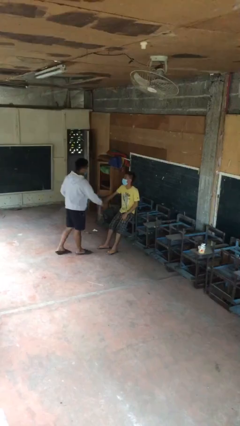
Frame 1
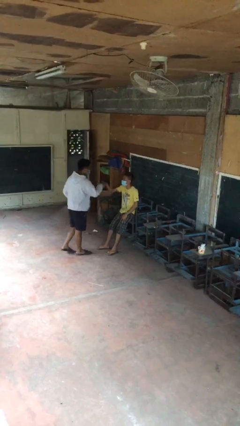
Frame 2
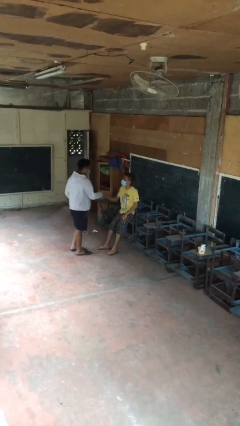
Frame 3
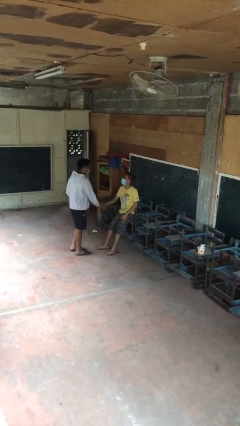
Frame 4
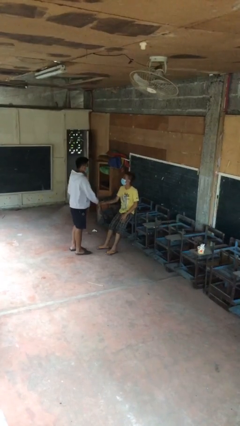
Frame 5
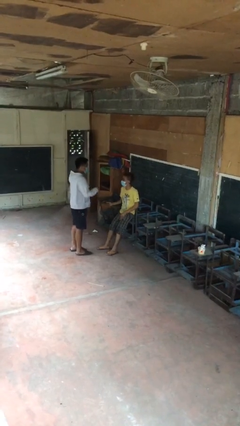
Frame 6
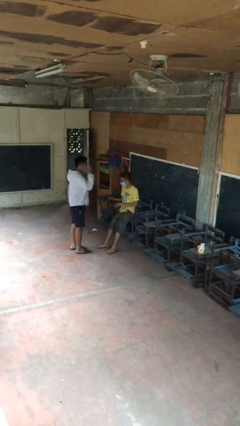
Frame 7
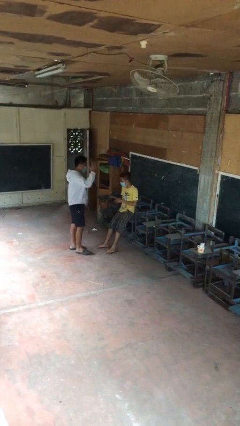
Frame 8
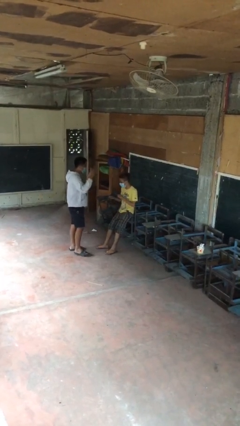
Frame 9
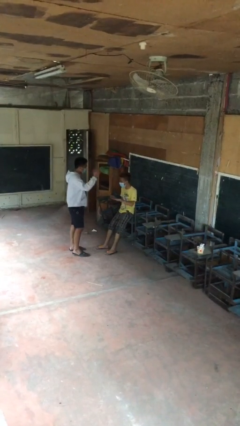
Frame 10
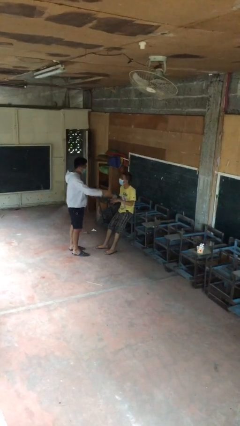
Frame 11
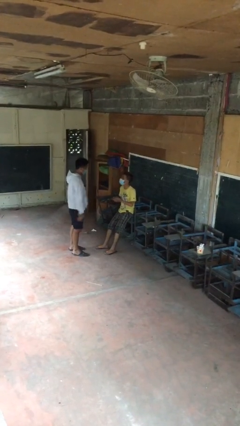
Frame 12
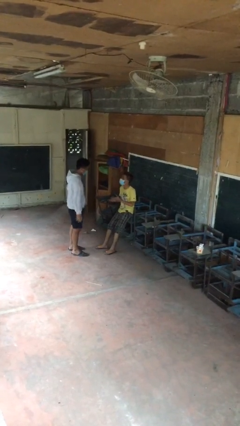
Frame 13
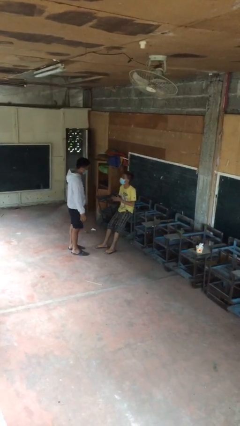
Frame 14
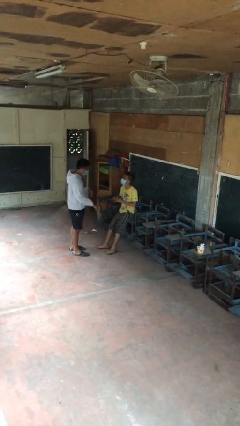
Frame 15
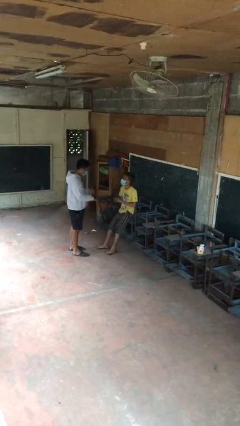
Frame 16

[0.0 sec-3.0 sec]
person shakes hand

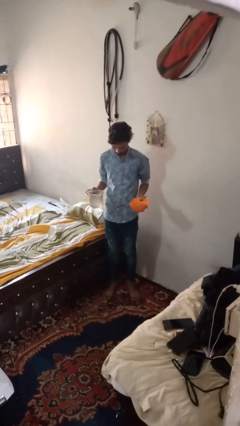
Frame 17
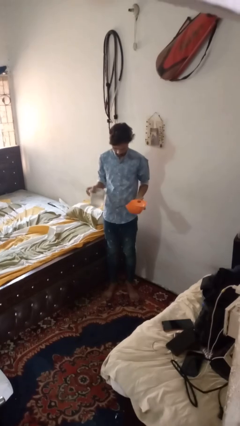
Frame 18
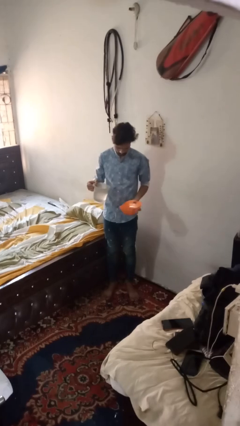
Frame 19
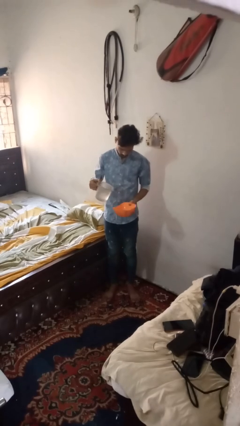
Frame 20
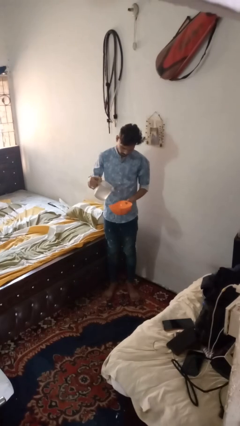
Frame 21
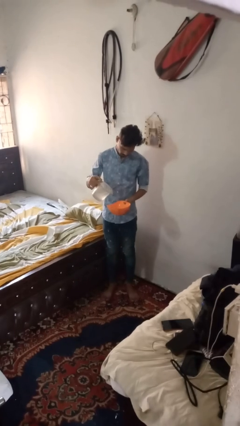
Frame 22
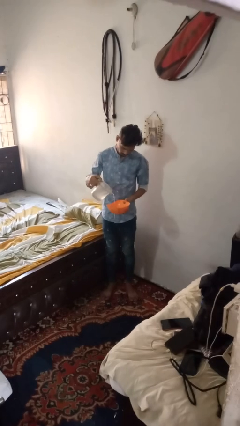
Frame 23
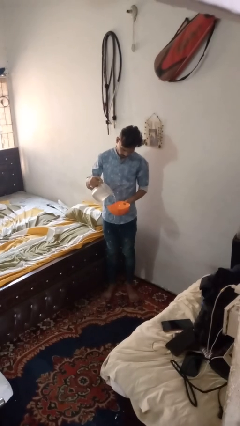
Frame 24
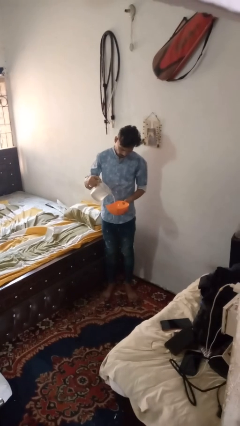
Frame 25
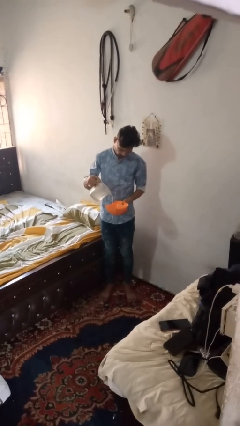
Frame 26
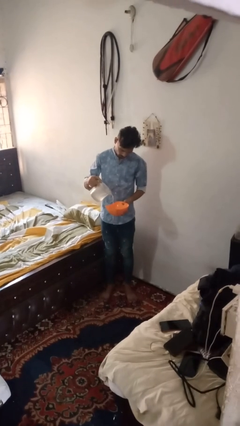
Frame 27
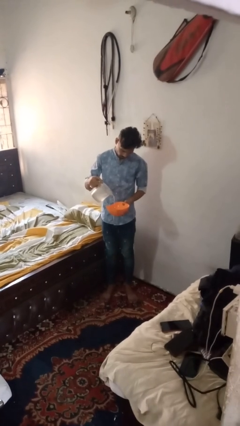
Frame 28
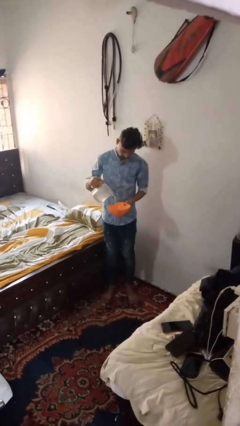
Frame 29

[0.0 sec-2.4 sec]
person pours into bowl

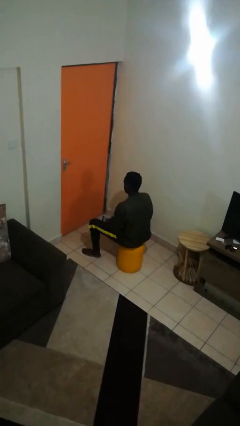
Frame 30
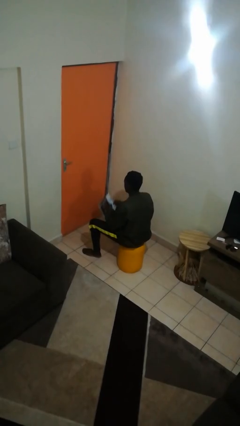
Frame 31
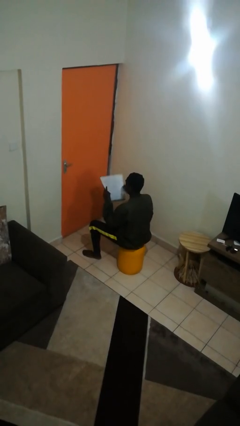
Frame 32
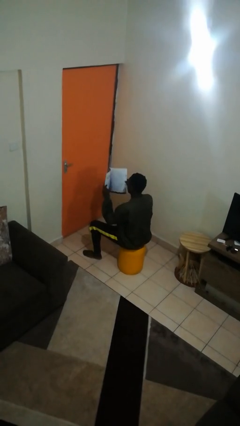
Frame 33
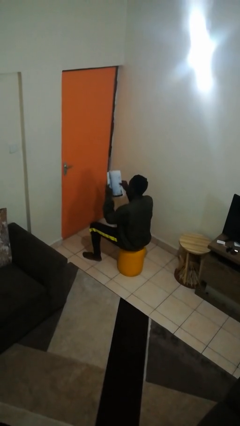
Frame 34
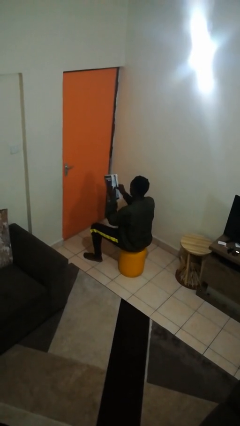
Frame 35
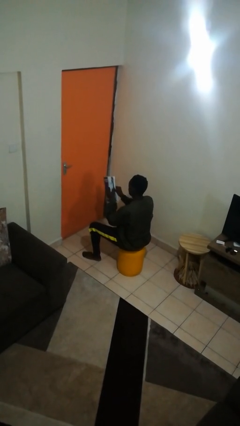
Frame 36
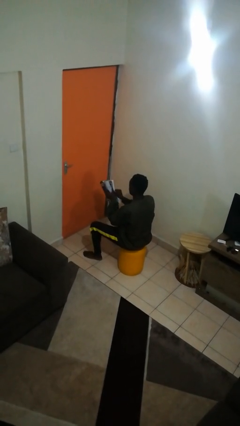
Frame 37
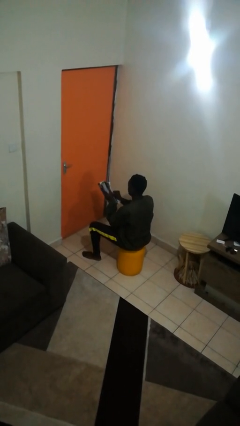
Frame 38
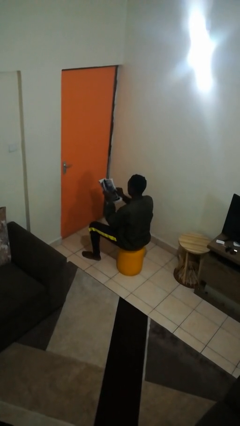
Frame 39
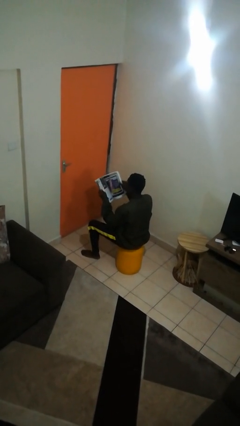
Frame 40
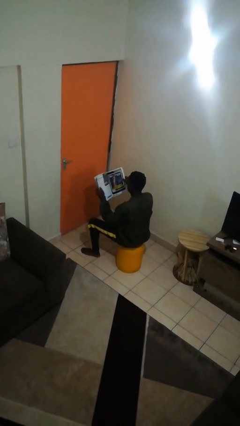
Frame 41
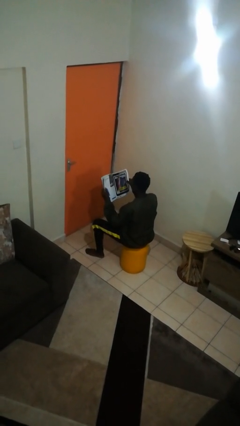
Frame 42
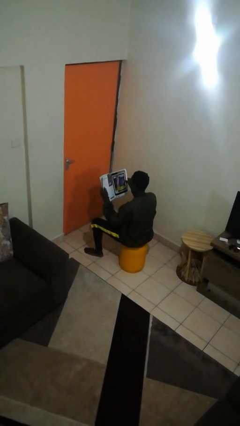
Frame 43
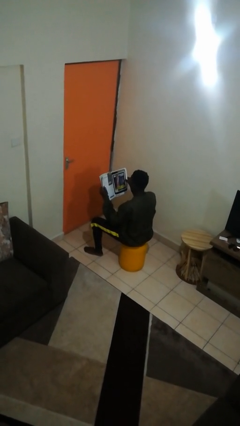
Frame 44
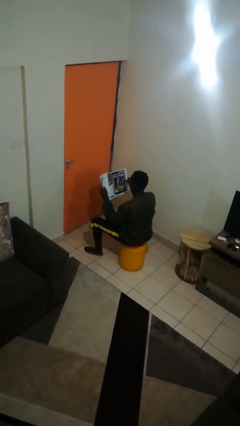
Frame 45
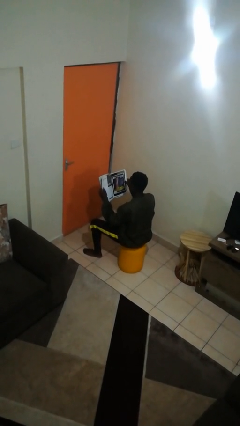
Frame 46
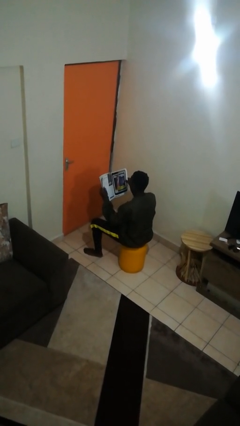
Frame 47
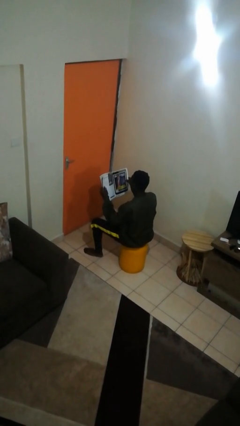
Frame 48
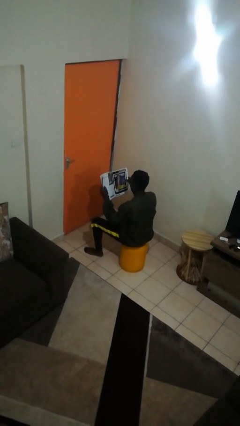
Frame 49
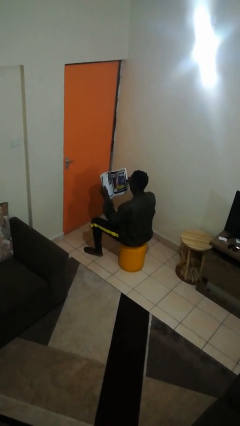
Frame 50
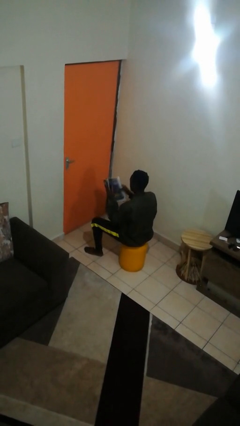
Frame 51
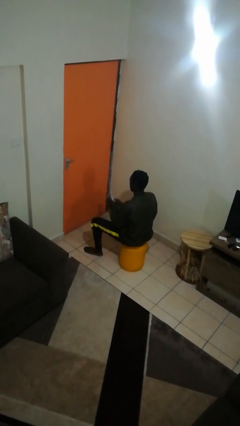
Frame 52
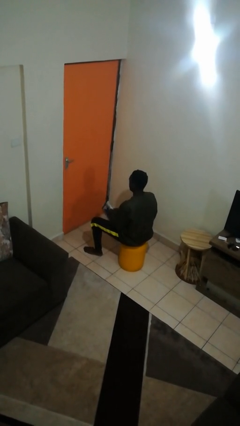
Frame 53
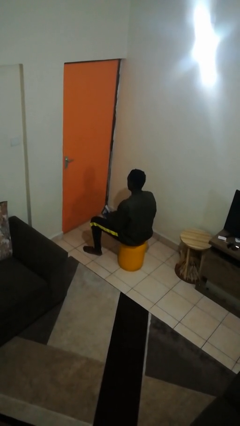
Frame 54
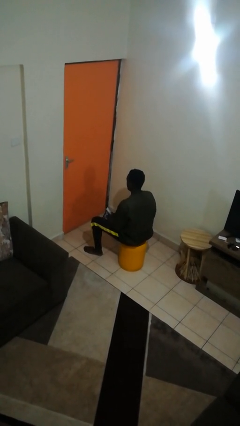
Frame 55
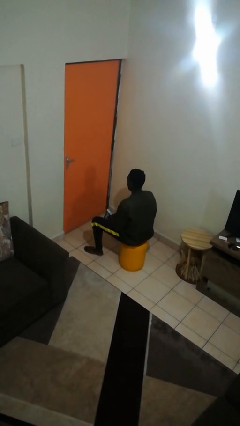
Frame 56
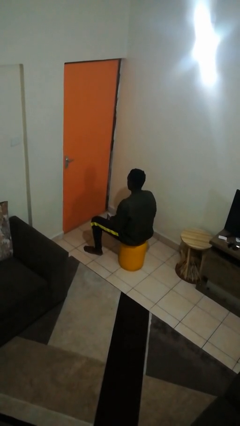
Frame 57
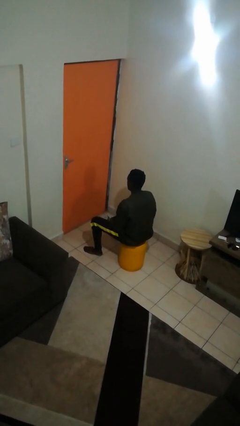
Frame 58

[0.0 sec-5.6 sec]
person reads magazine

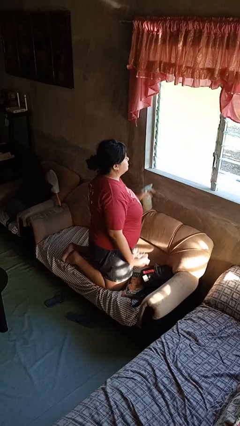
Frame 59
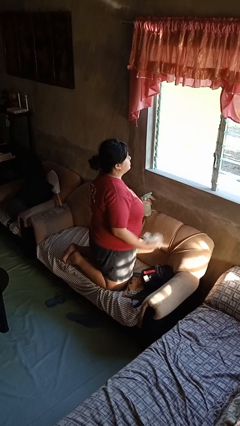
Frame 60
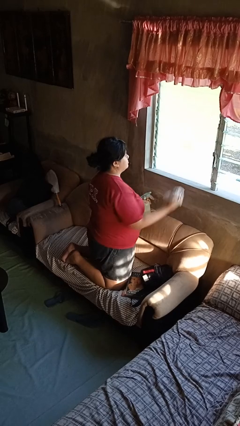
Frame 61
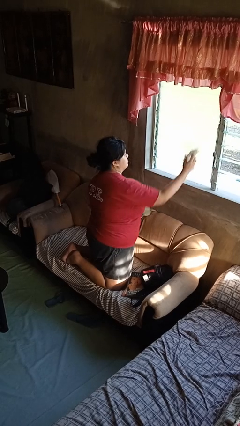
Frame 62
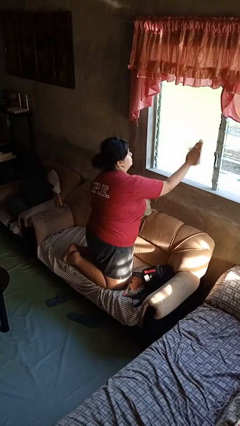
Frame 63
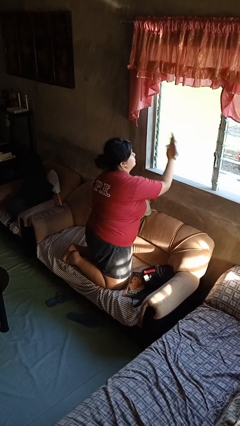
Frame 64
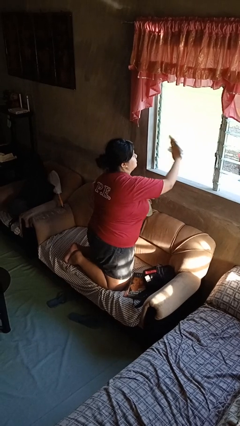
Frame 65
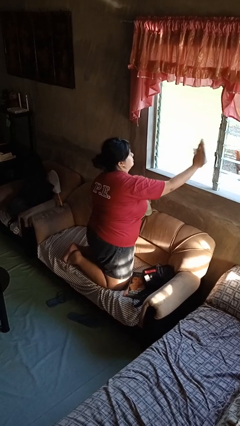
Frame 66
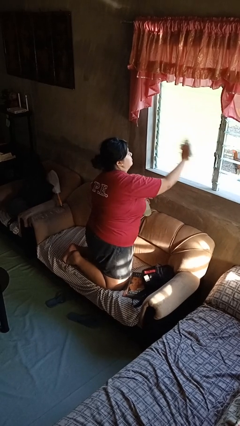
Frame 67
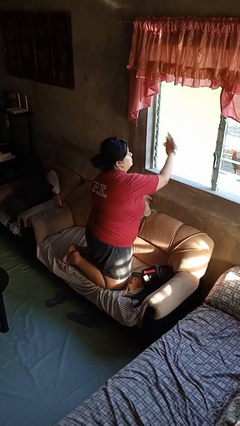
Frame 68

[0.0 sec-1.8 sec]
person washes window

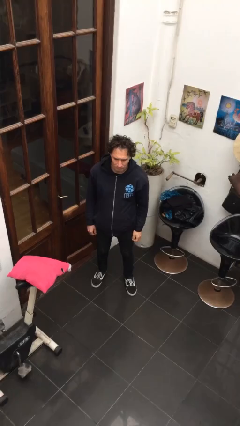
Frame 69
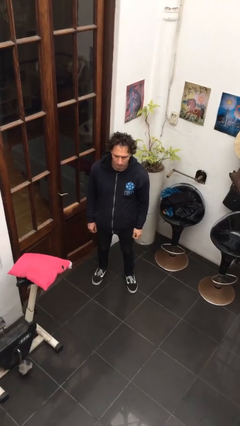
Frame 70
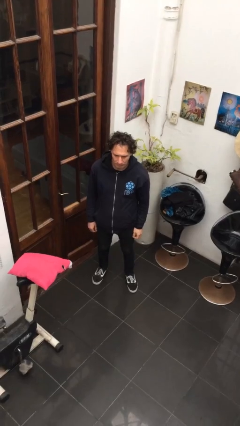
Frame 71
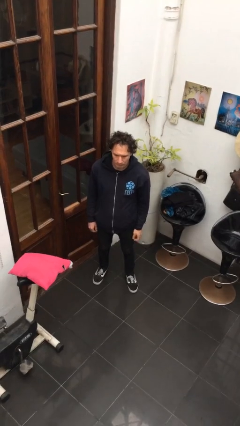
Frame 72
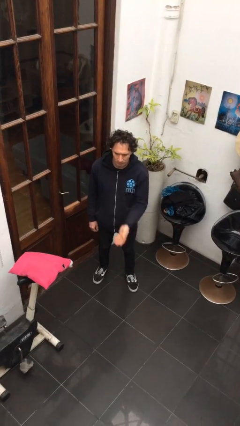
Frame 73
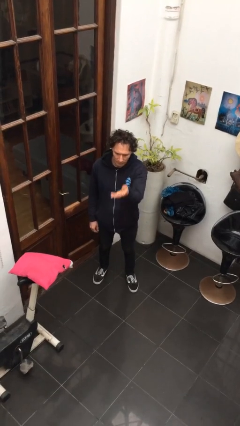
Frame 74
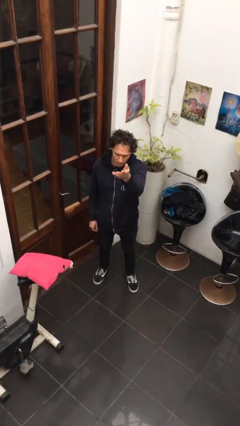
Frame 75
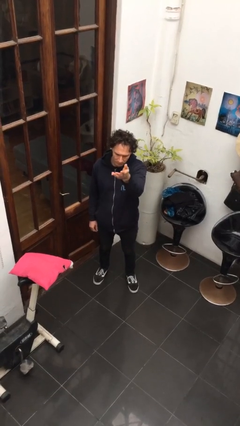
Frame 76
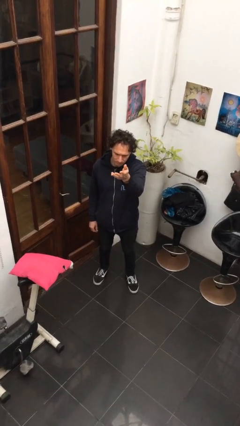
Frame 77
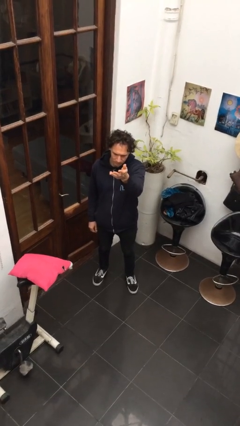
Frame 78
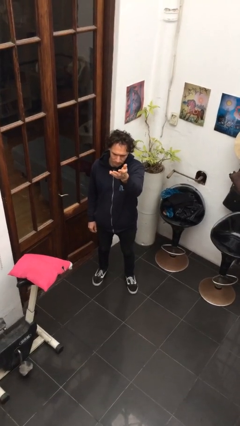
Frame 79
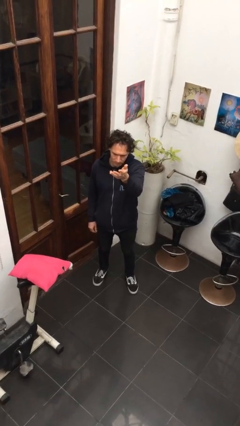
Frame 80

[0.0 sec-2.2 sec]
person gestures swipe up

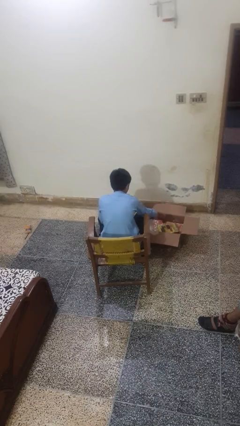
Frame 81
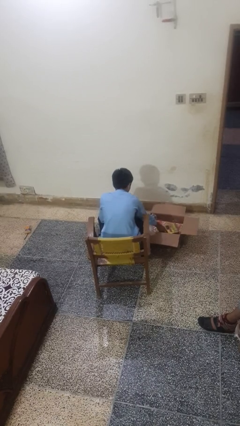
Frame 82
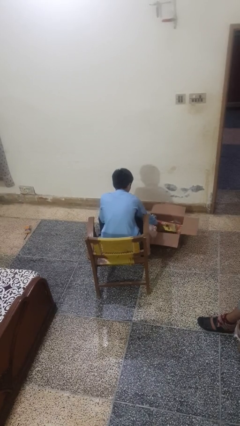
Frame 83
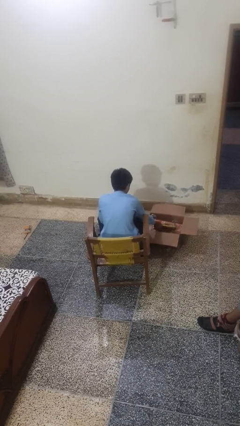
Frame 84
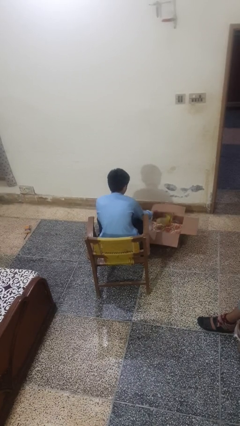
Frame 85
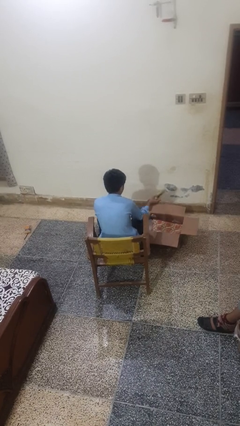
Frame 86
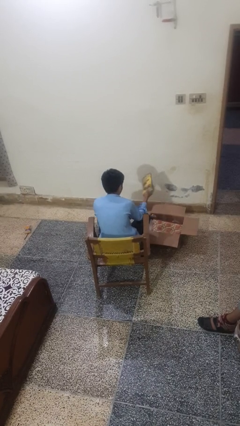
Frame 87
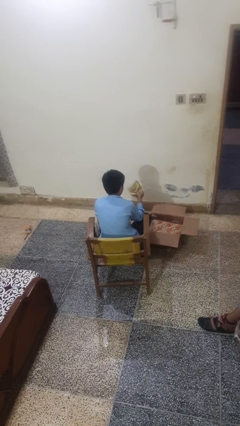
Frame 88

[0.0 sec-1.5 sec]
person takes object from box

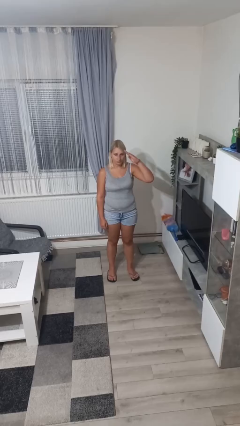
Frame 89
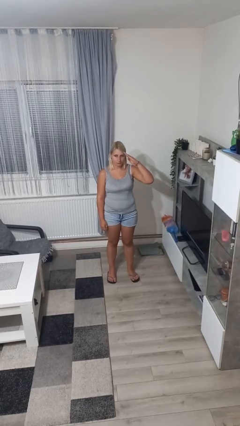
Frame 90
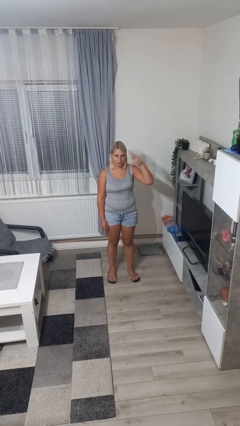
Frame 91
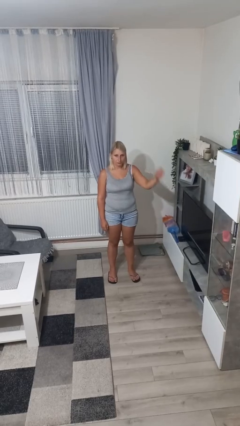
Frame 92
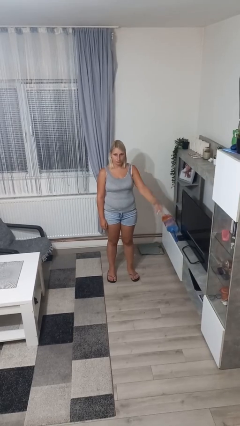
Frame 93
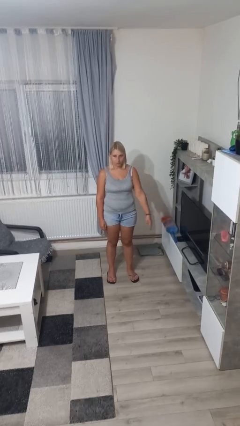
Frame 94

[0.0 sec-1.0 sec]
person salutes
